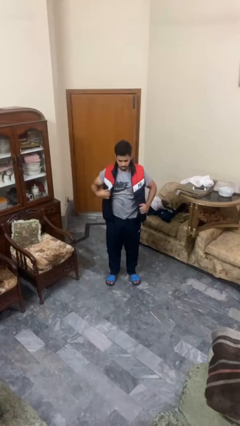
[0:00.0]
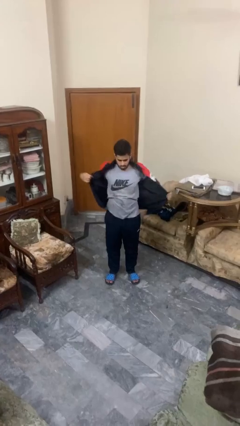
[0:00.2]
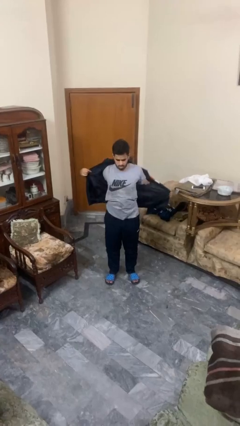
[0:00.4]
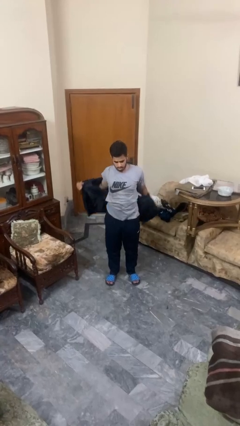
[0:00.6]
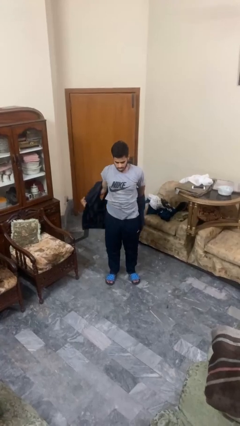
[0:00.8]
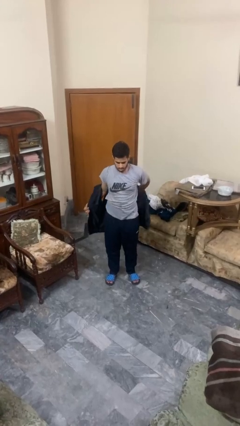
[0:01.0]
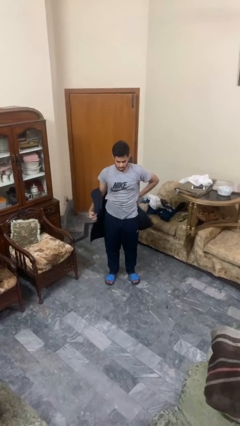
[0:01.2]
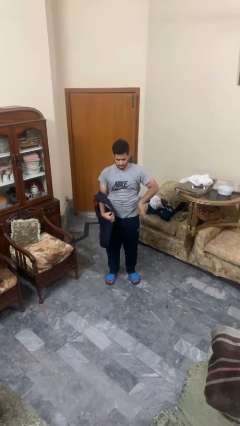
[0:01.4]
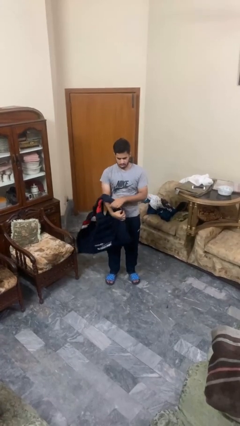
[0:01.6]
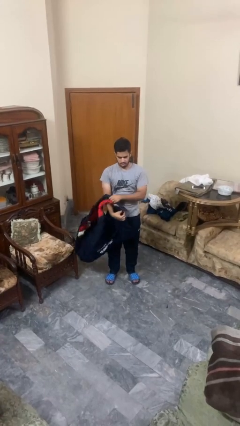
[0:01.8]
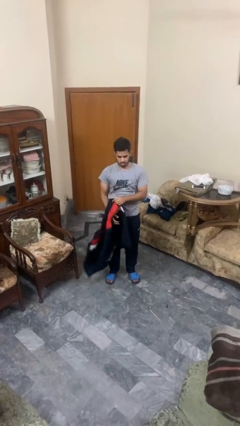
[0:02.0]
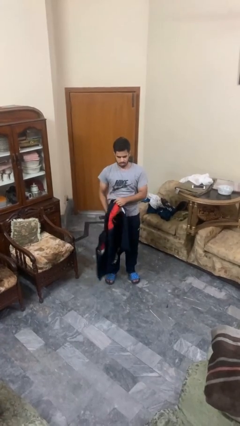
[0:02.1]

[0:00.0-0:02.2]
person takes off jacket

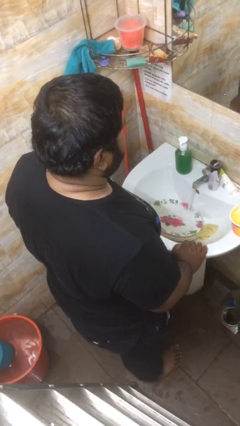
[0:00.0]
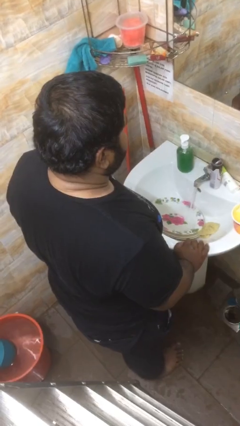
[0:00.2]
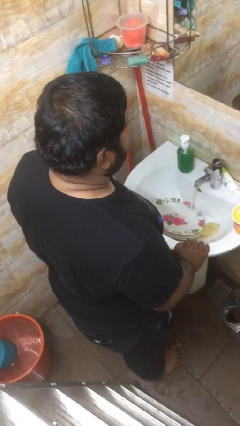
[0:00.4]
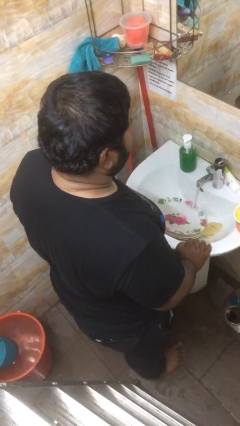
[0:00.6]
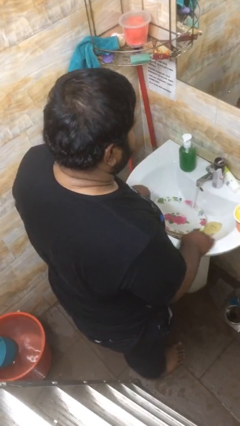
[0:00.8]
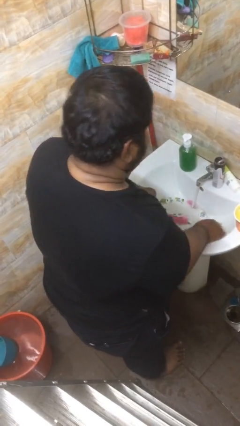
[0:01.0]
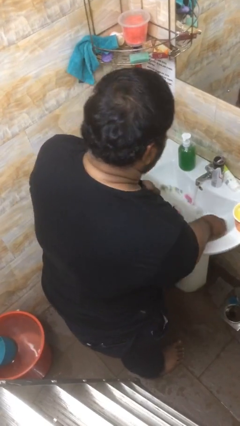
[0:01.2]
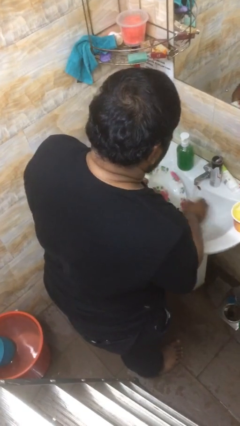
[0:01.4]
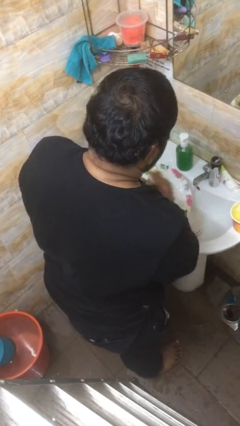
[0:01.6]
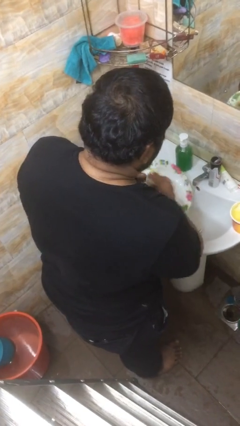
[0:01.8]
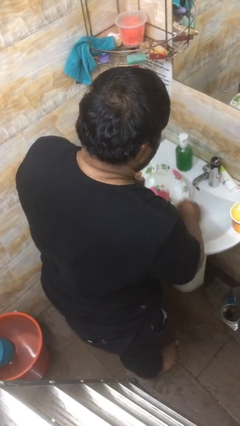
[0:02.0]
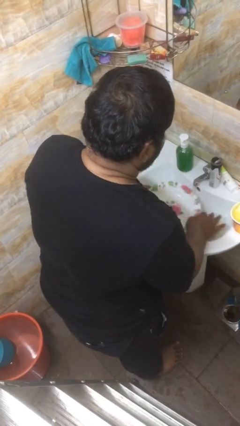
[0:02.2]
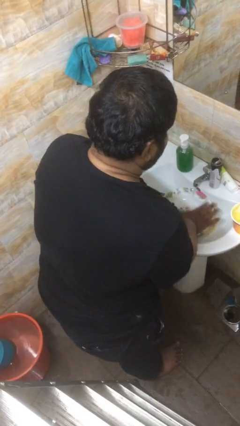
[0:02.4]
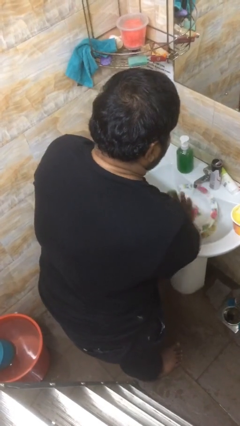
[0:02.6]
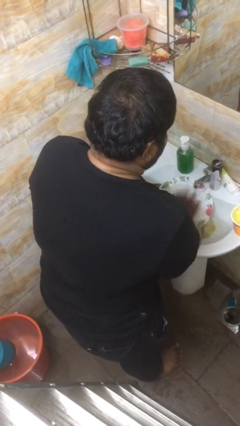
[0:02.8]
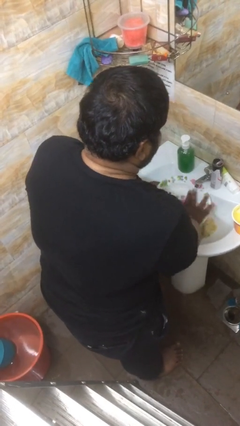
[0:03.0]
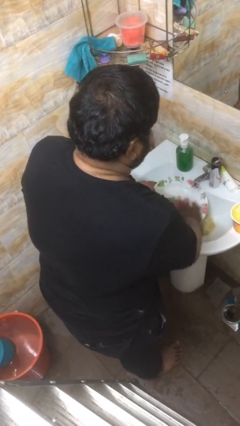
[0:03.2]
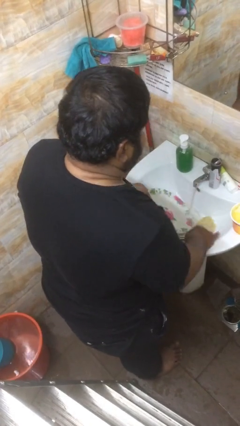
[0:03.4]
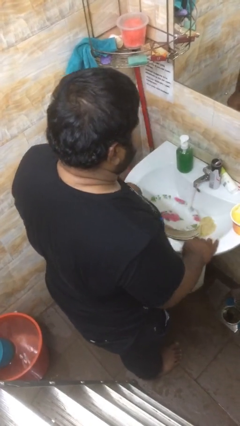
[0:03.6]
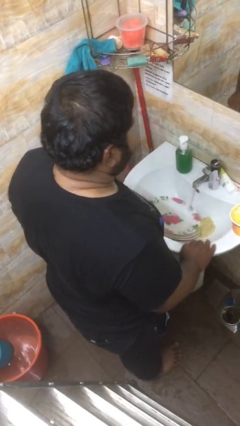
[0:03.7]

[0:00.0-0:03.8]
person washes dish

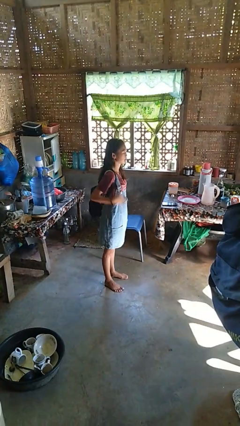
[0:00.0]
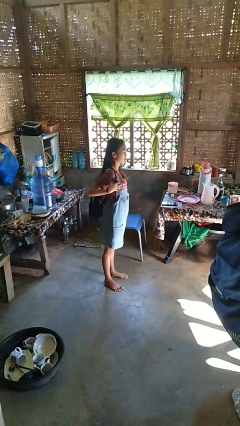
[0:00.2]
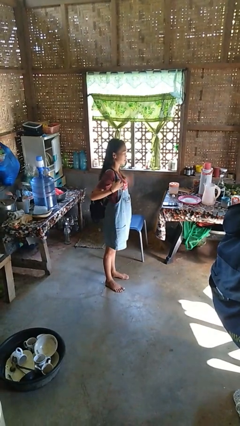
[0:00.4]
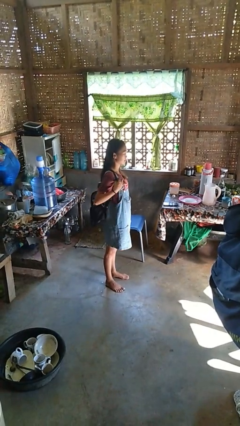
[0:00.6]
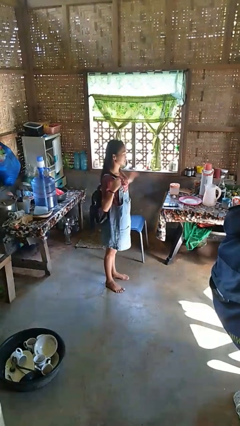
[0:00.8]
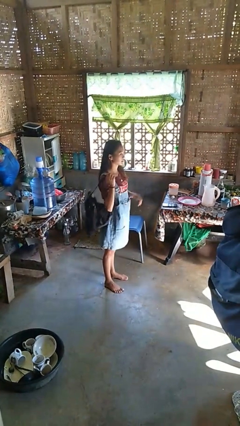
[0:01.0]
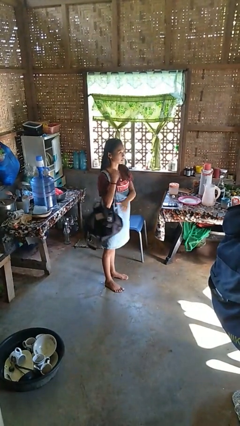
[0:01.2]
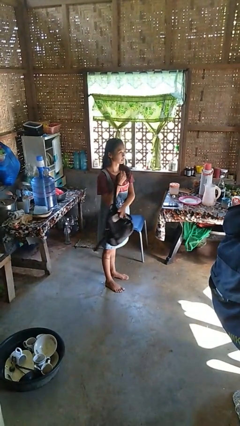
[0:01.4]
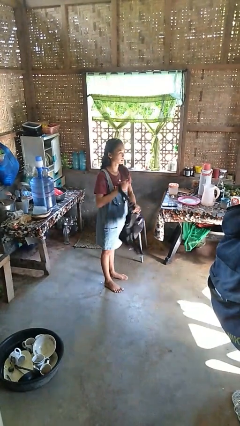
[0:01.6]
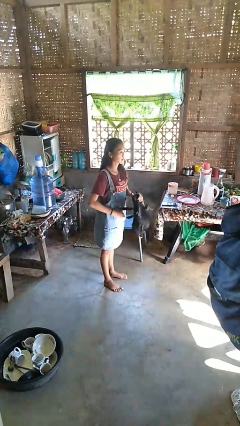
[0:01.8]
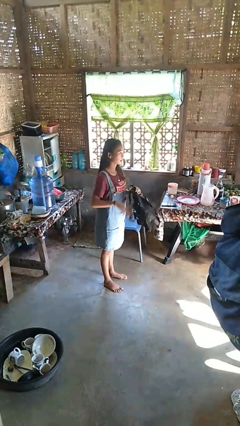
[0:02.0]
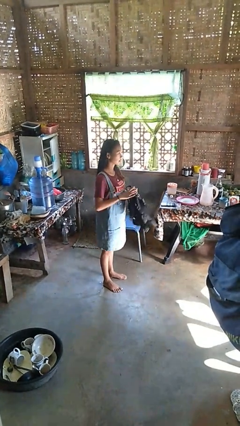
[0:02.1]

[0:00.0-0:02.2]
person takes off backpack

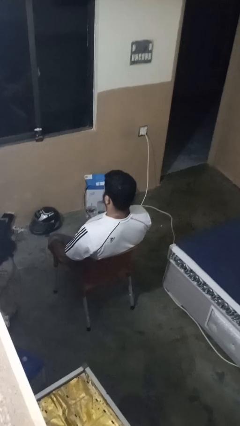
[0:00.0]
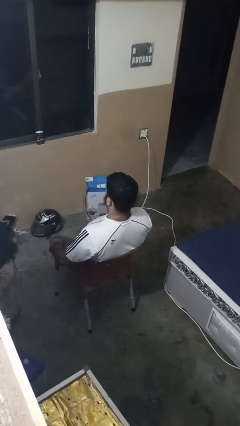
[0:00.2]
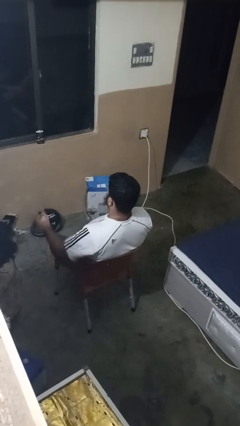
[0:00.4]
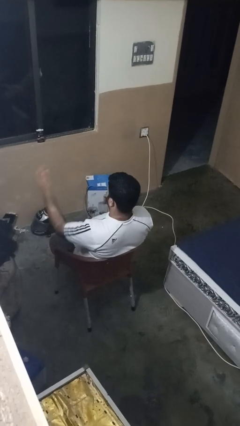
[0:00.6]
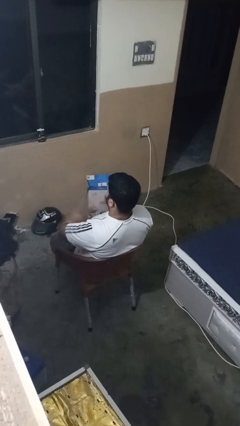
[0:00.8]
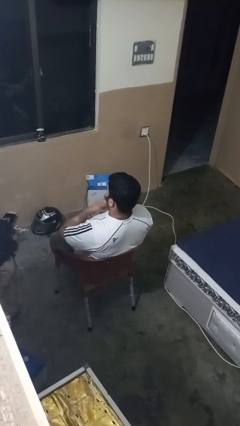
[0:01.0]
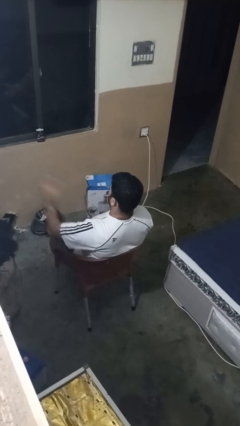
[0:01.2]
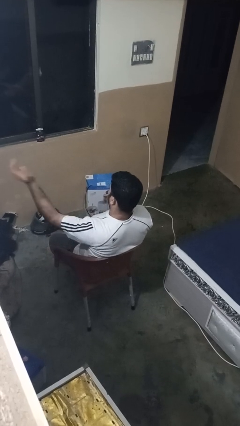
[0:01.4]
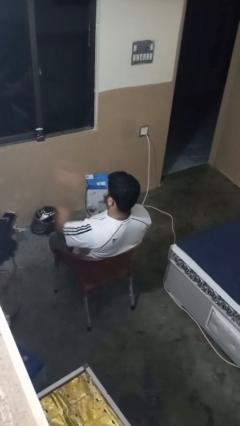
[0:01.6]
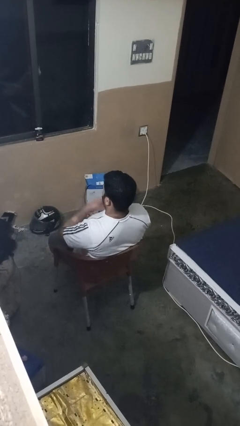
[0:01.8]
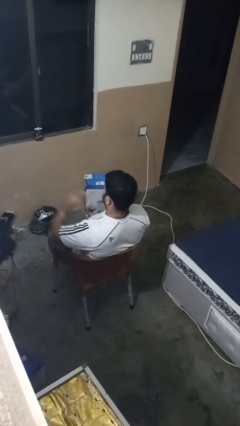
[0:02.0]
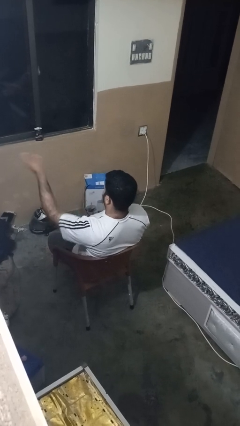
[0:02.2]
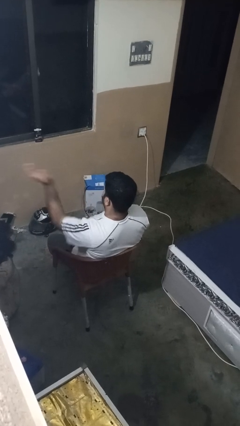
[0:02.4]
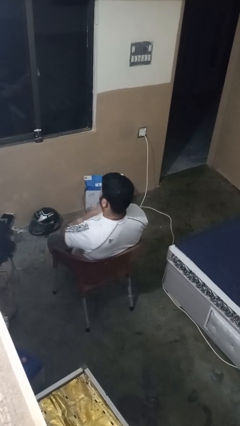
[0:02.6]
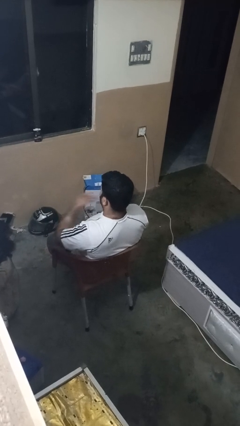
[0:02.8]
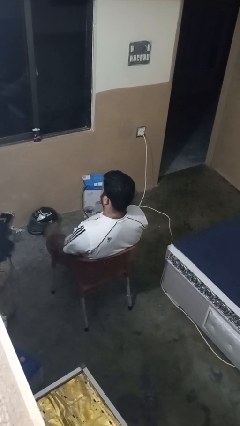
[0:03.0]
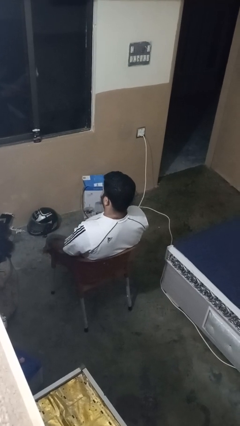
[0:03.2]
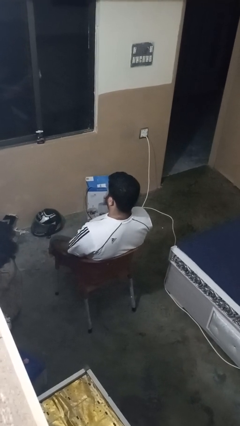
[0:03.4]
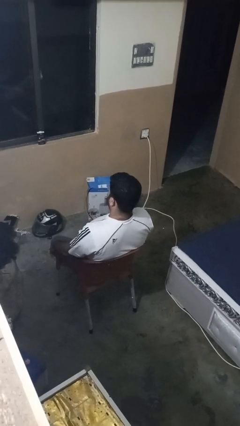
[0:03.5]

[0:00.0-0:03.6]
person drums on chest

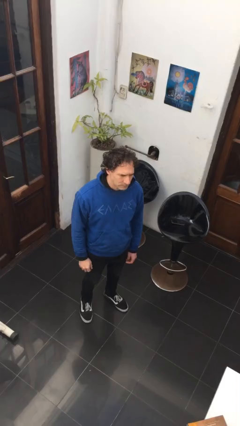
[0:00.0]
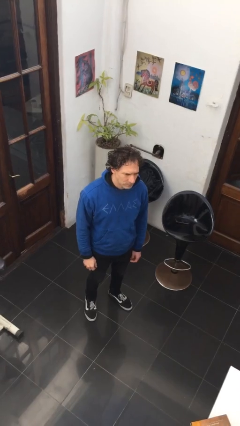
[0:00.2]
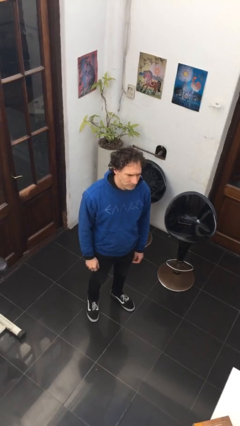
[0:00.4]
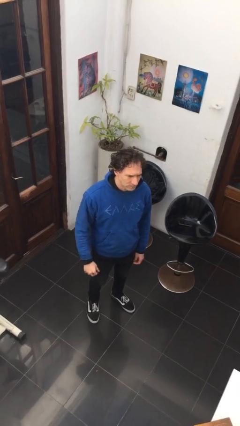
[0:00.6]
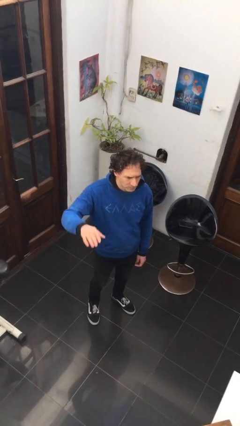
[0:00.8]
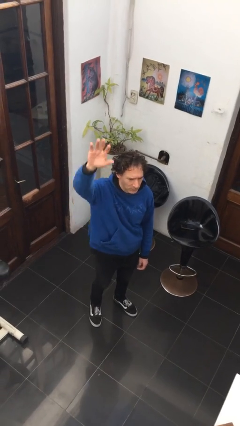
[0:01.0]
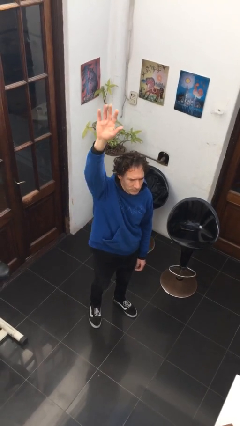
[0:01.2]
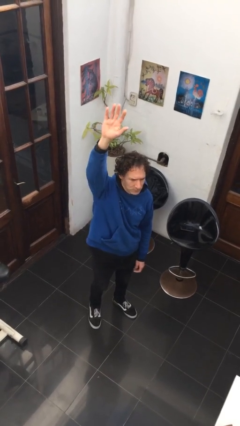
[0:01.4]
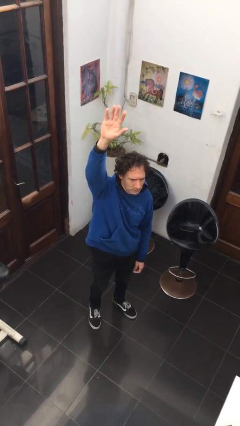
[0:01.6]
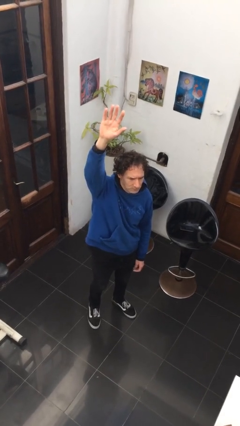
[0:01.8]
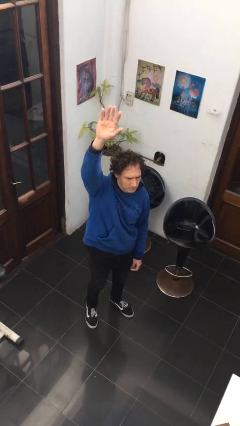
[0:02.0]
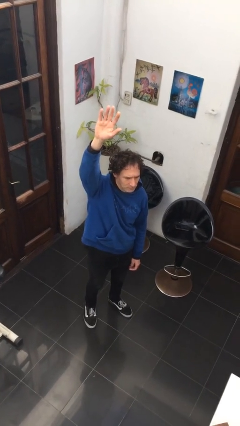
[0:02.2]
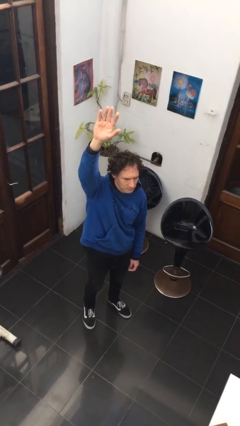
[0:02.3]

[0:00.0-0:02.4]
person gestures raise hand

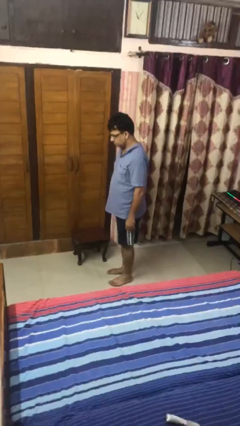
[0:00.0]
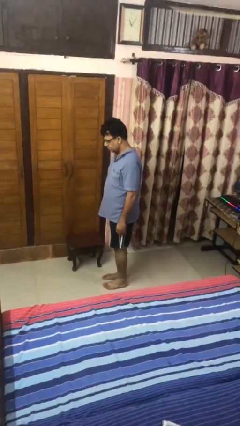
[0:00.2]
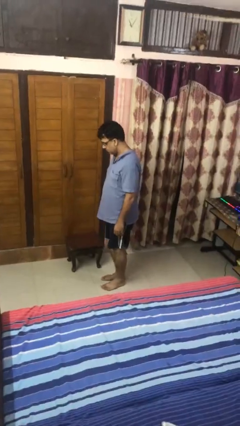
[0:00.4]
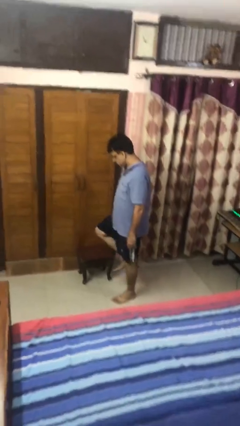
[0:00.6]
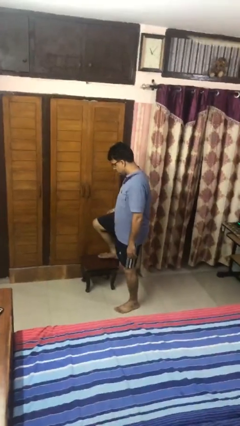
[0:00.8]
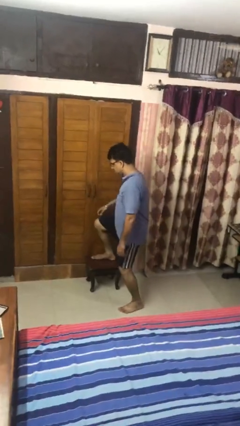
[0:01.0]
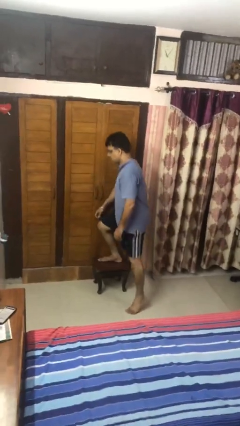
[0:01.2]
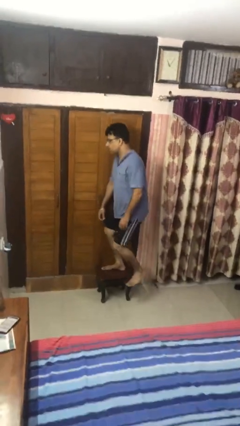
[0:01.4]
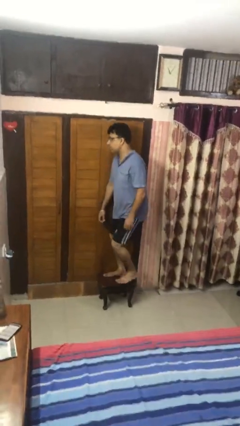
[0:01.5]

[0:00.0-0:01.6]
person climbs on table

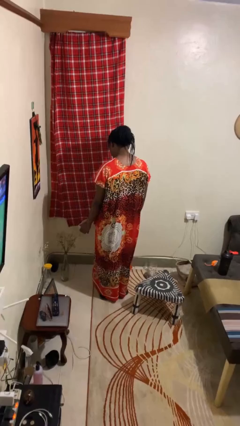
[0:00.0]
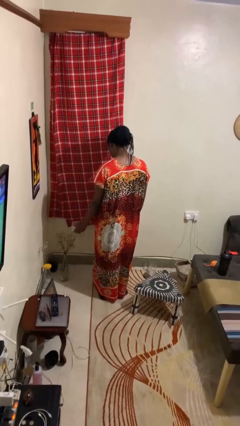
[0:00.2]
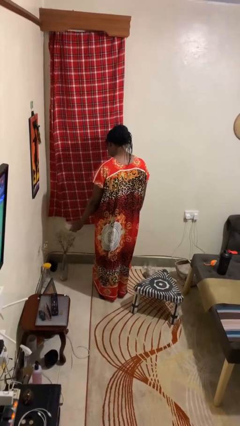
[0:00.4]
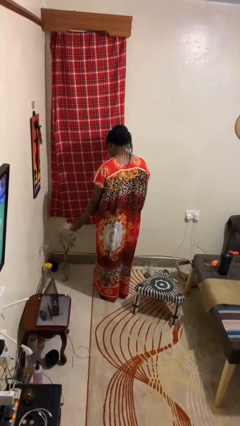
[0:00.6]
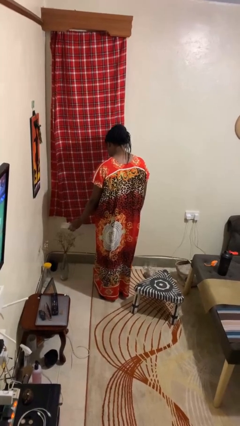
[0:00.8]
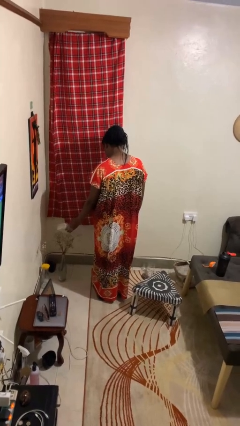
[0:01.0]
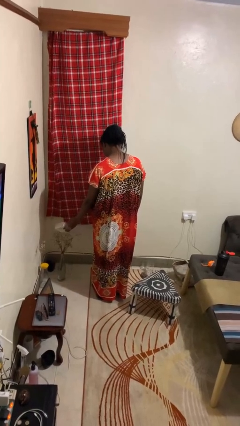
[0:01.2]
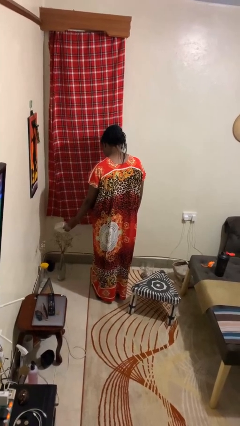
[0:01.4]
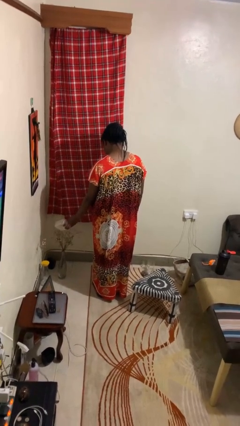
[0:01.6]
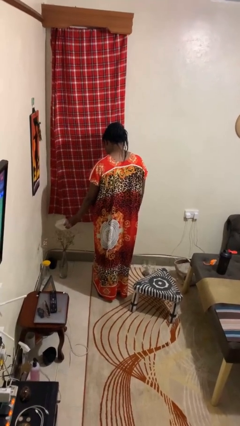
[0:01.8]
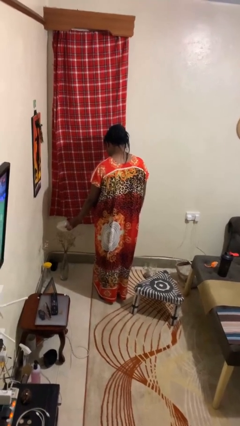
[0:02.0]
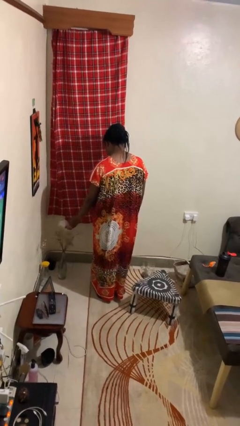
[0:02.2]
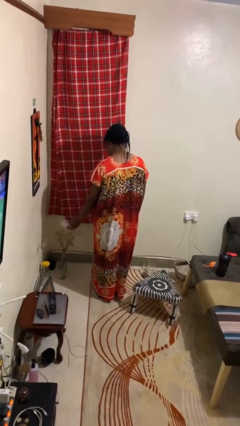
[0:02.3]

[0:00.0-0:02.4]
person waters houseplant
